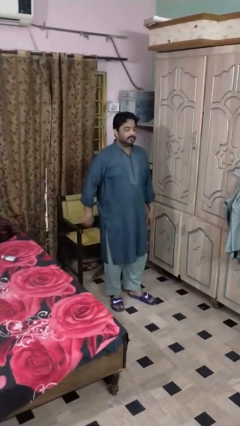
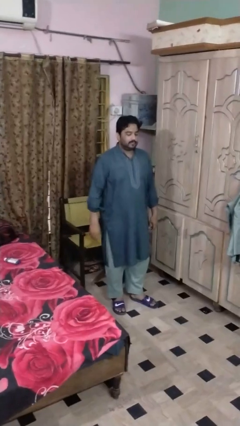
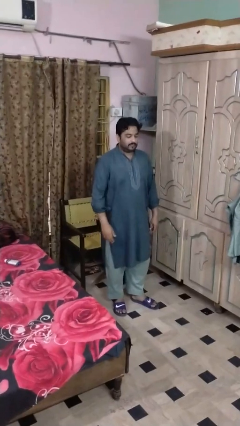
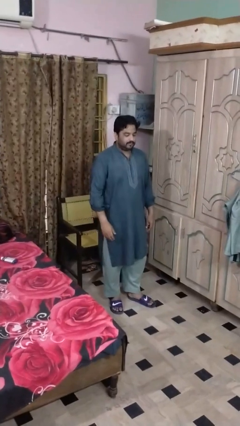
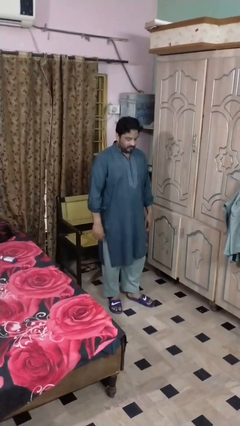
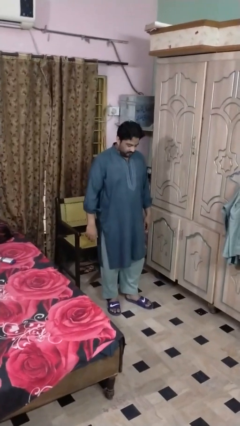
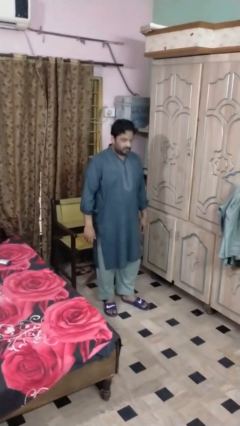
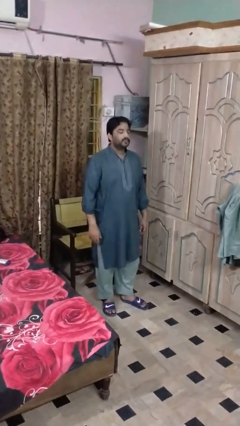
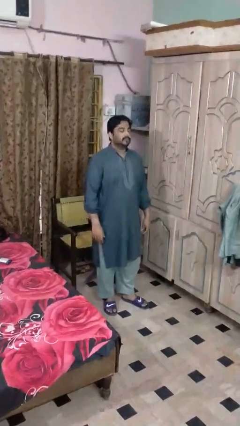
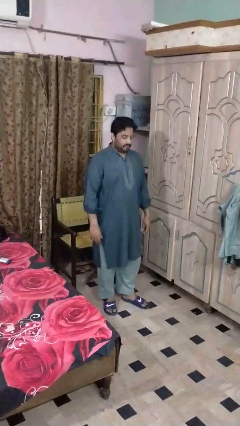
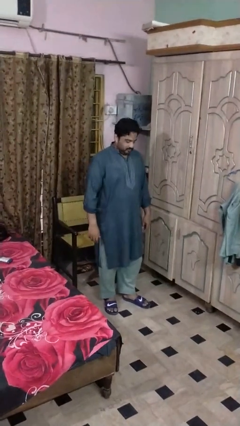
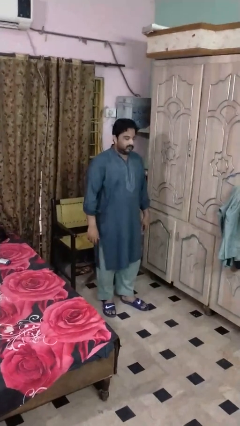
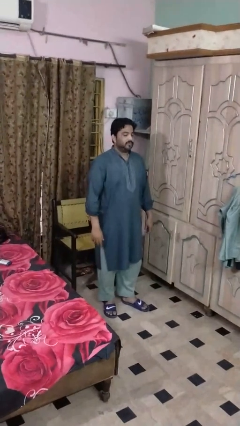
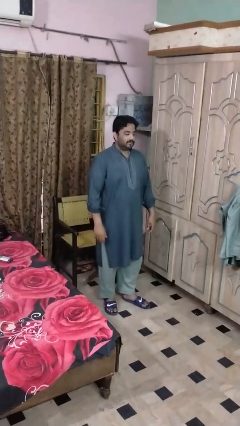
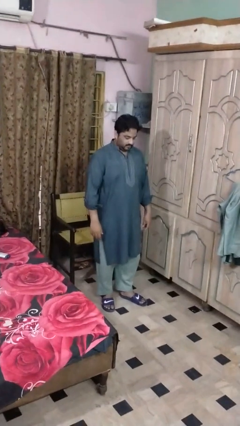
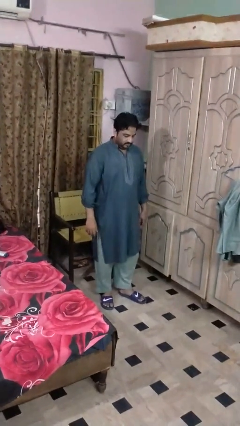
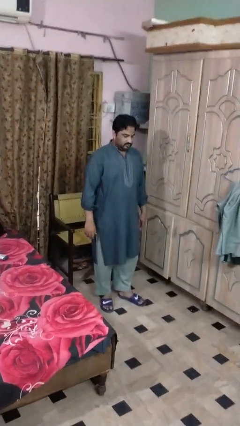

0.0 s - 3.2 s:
person nods head

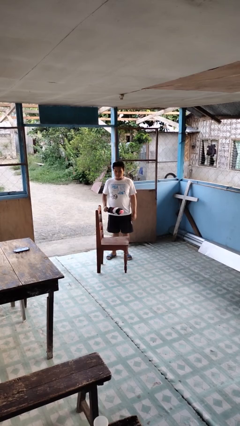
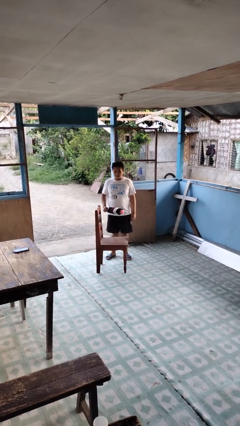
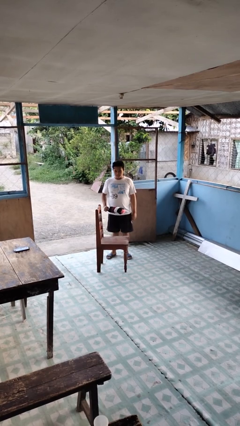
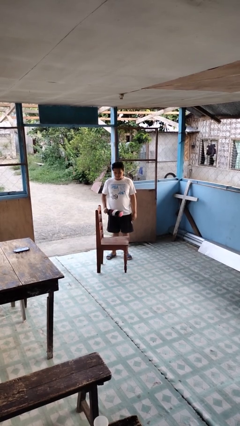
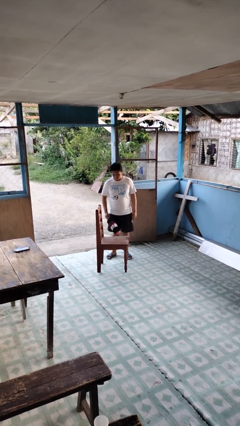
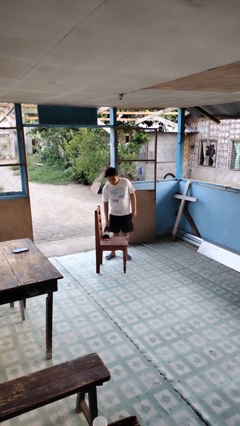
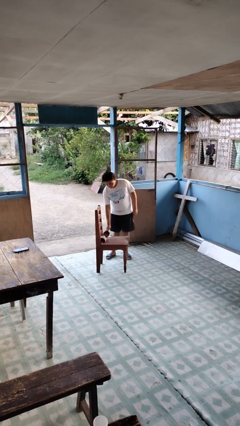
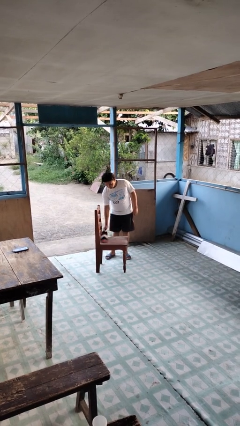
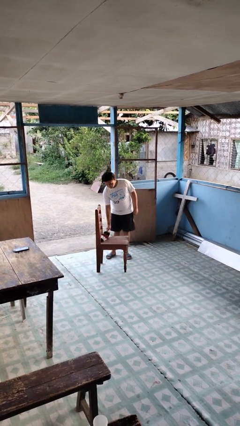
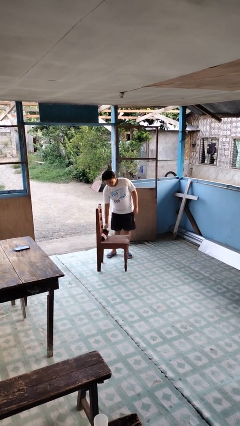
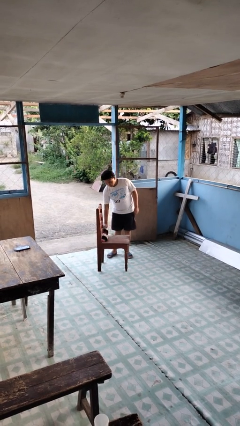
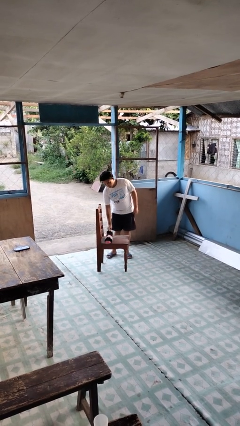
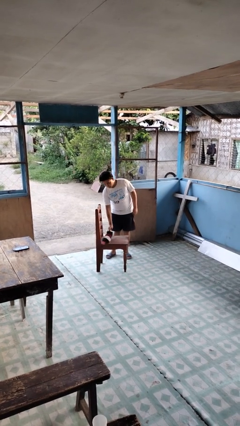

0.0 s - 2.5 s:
person dusts furniture

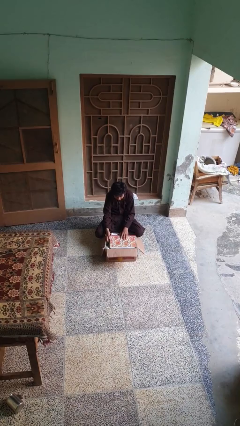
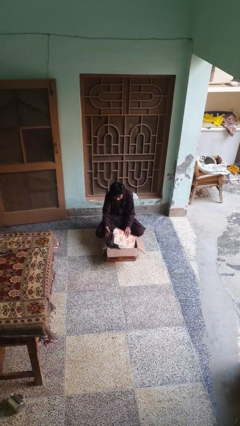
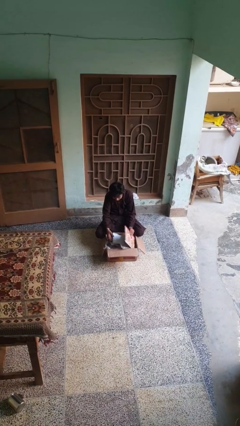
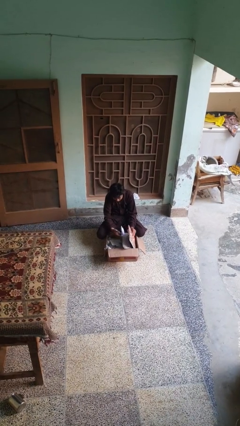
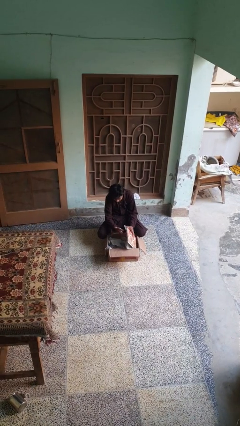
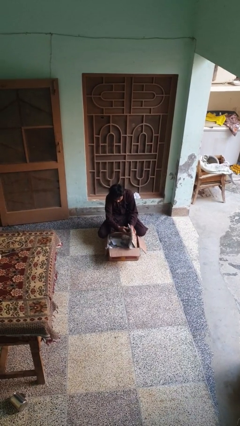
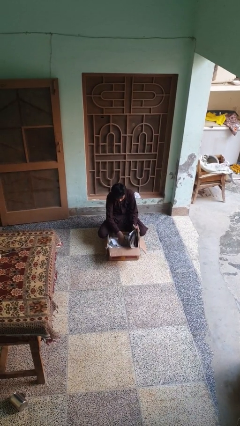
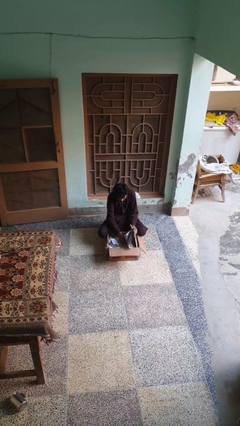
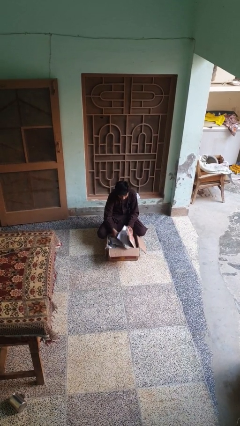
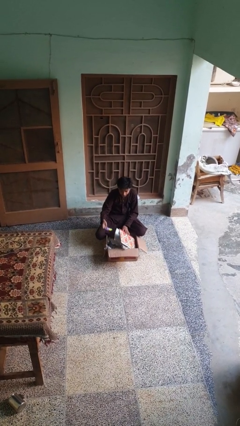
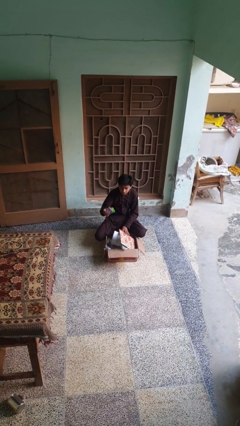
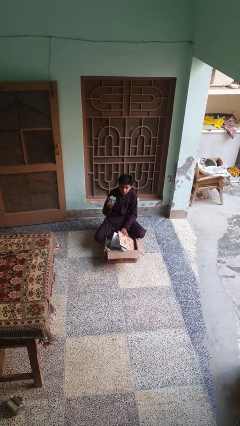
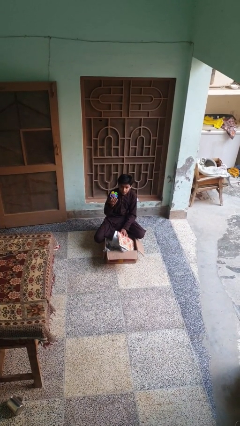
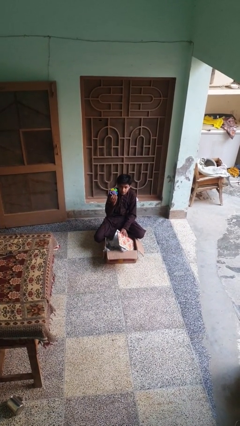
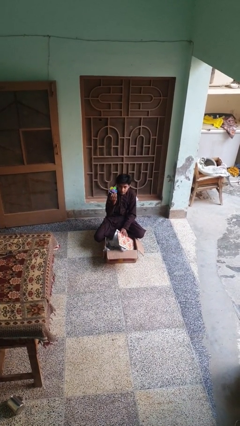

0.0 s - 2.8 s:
person takes object from box

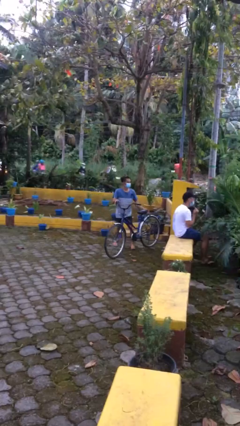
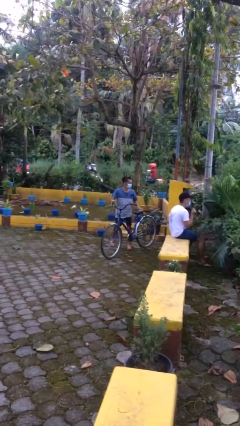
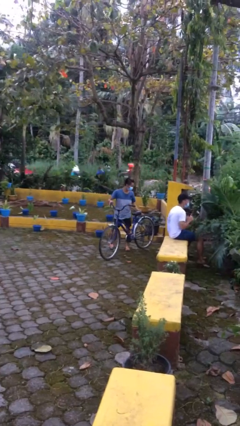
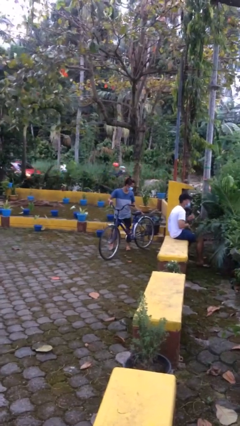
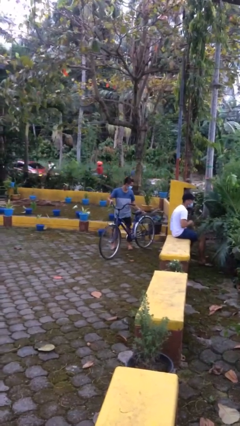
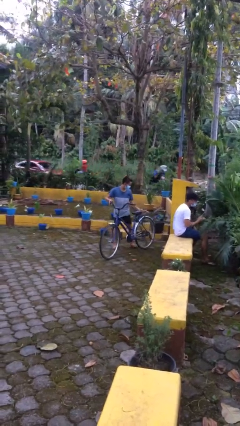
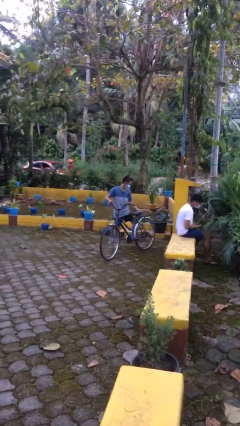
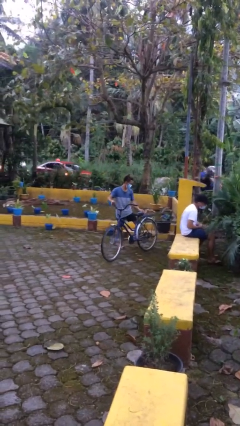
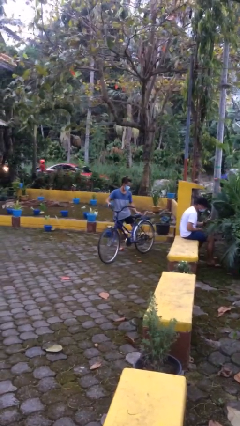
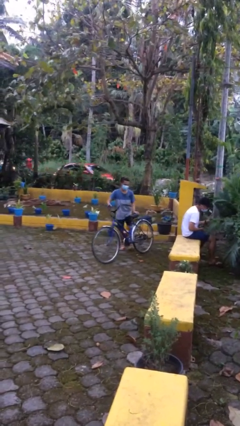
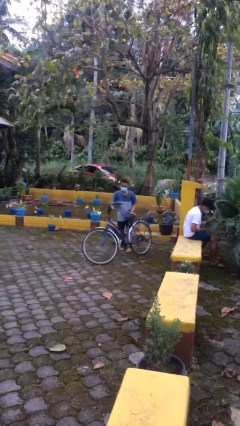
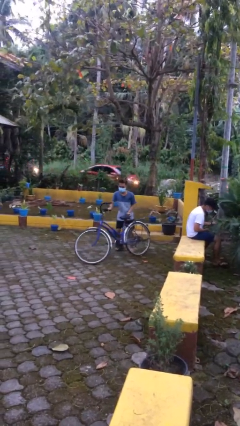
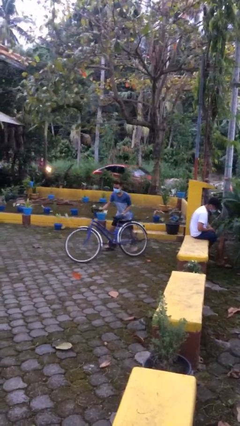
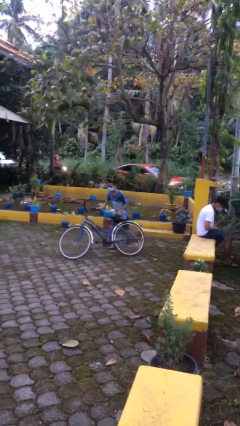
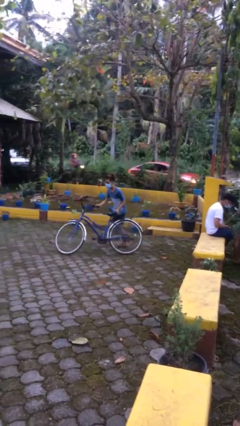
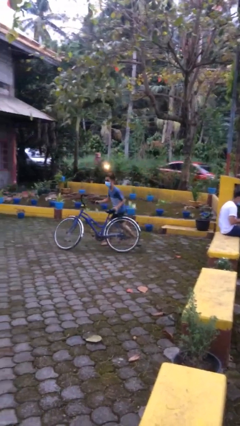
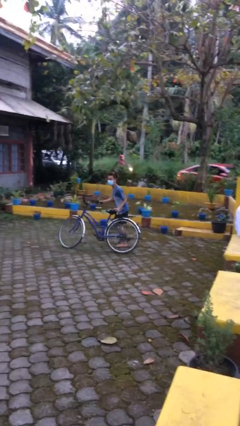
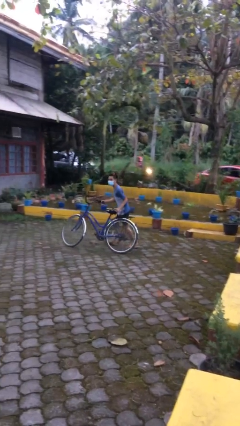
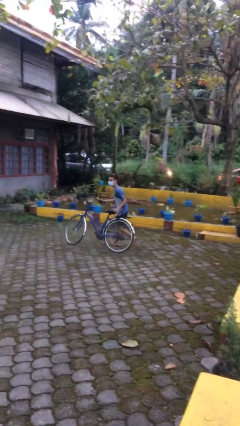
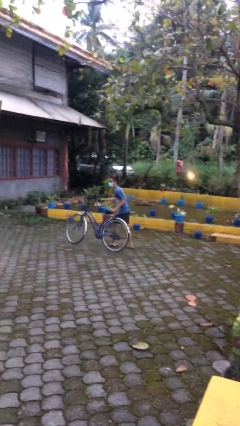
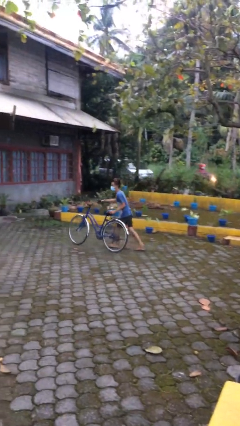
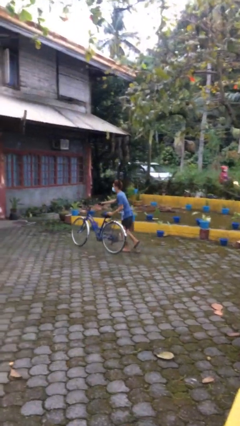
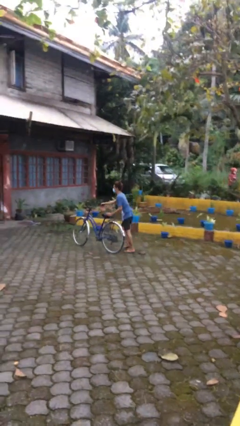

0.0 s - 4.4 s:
person steals object from person

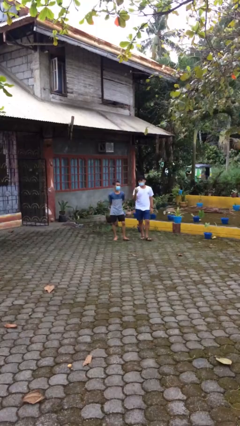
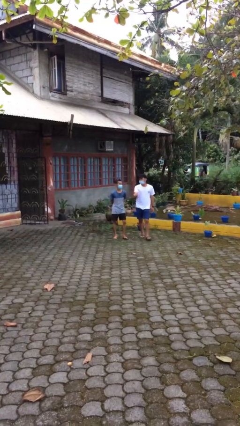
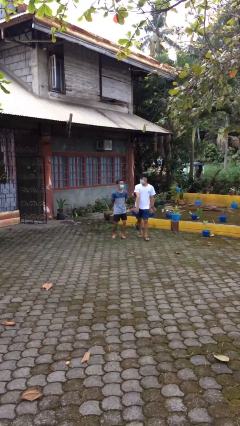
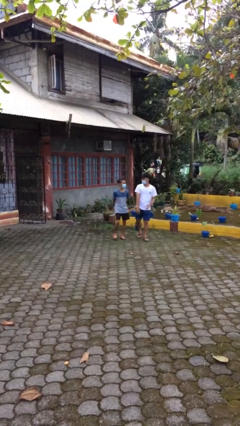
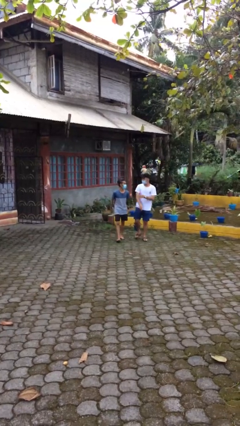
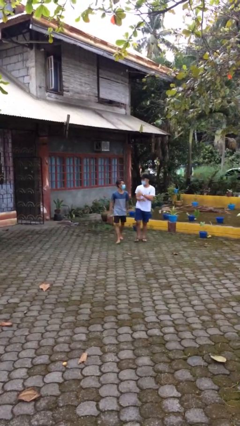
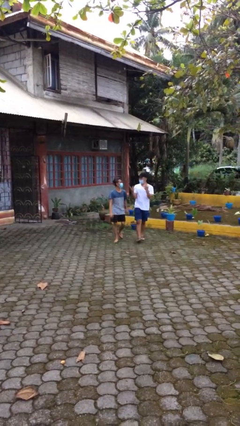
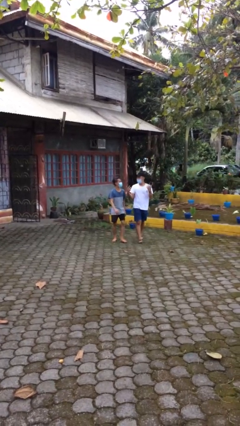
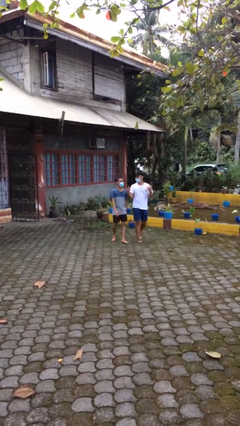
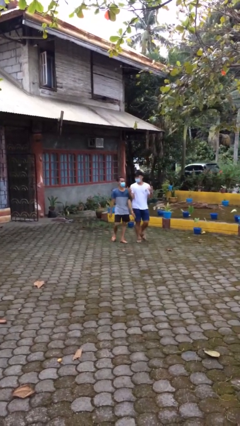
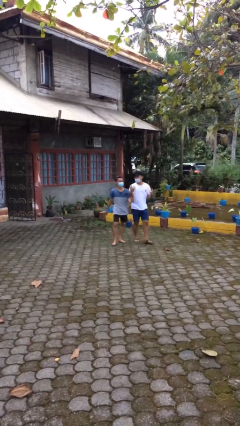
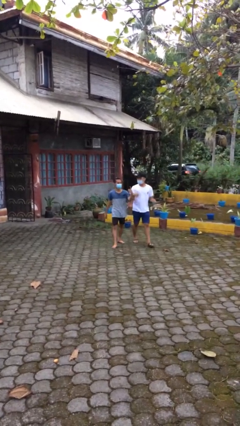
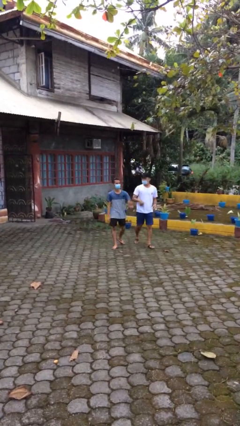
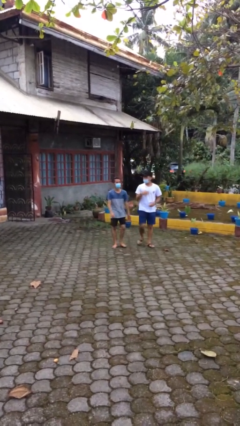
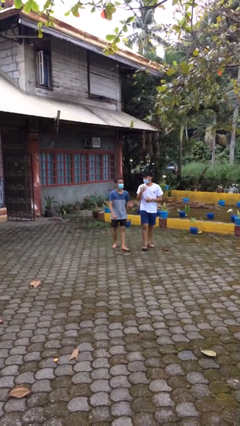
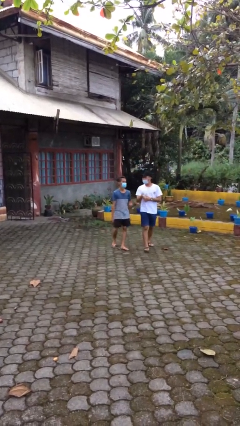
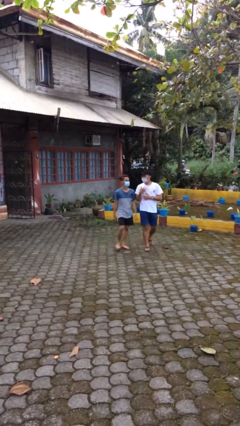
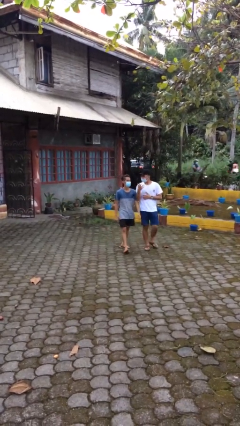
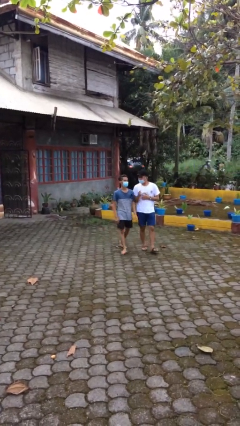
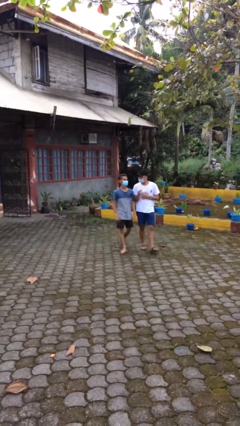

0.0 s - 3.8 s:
person talks to person

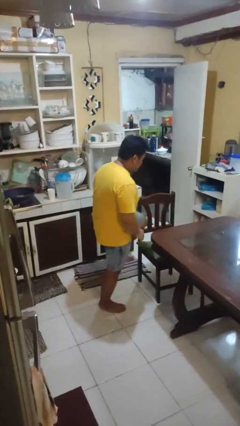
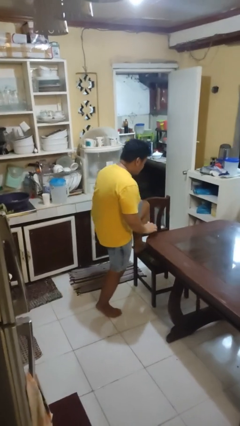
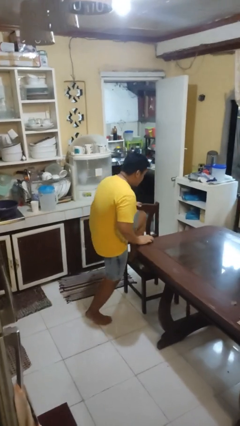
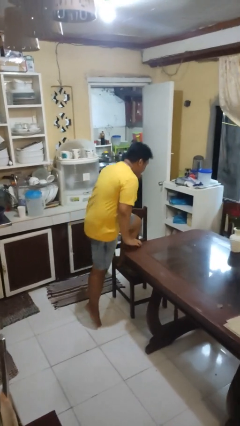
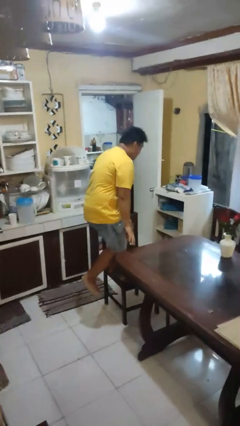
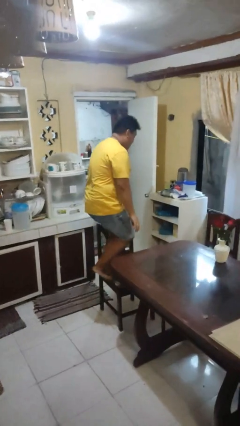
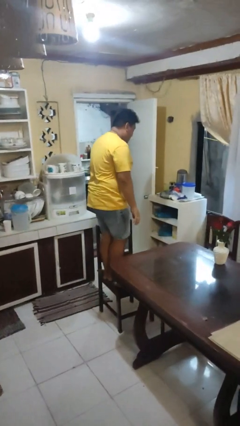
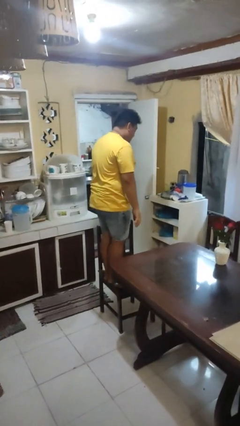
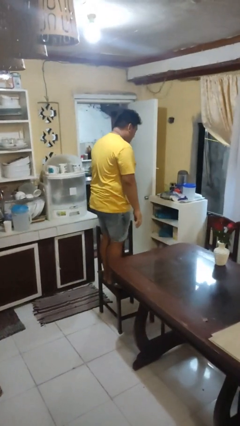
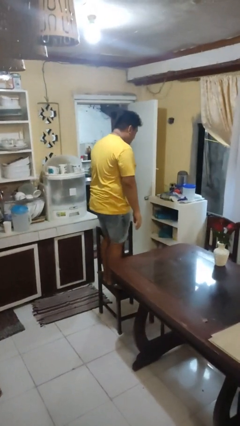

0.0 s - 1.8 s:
person climbs on chair
